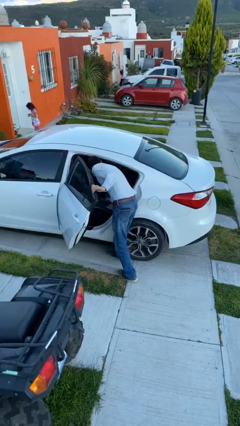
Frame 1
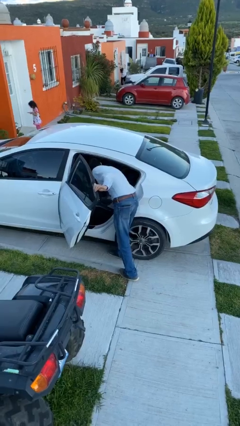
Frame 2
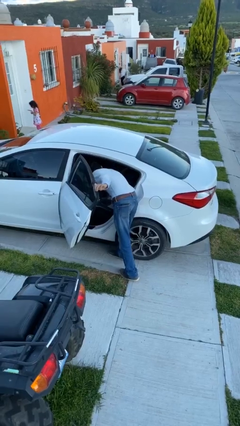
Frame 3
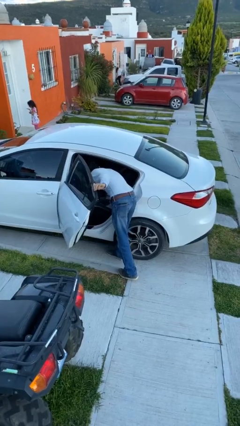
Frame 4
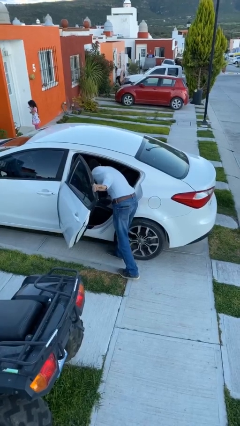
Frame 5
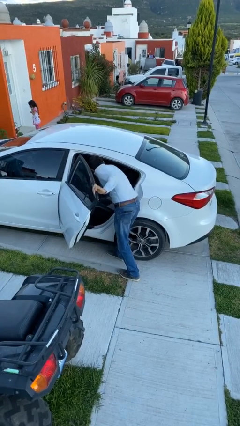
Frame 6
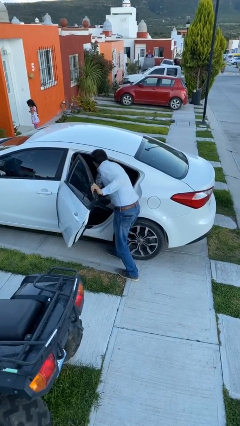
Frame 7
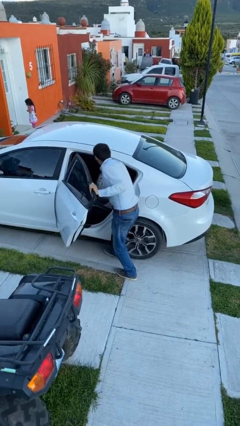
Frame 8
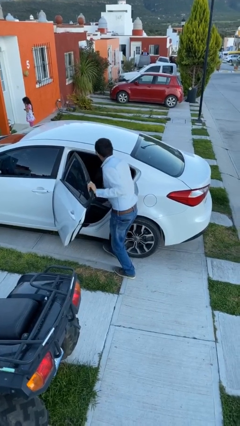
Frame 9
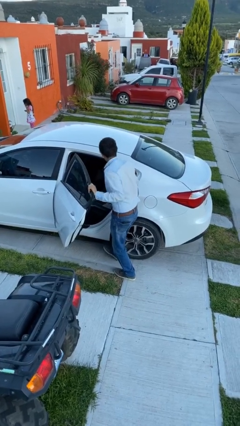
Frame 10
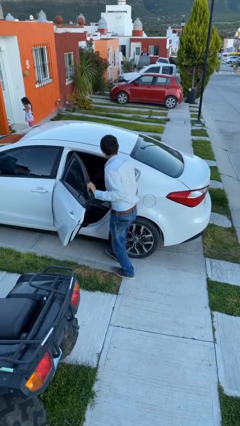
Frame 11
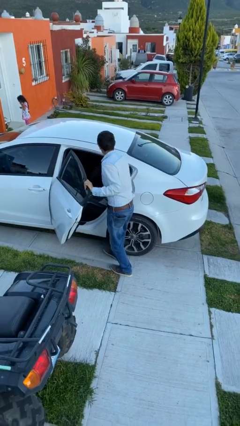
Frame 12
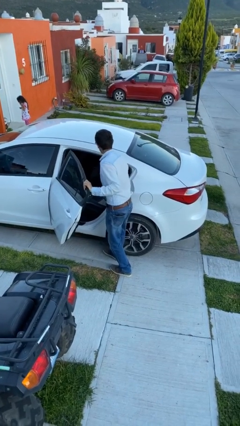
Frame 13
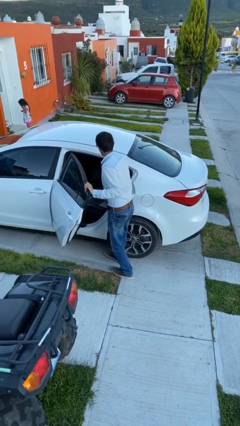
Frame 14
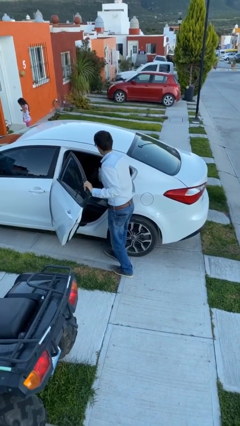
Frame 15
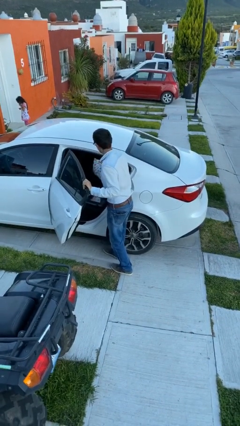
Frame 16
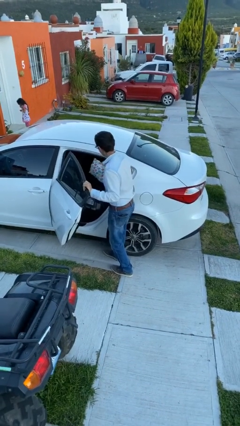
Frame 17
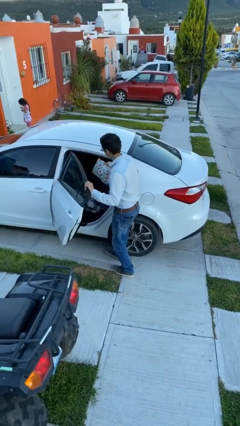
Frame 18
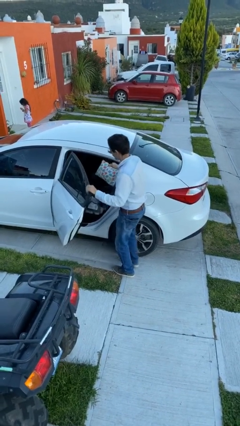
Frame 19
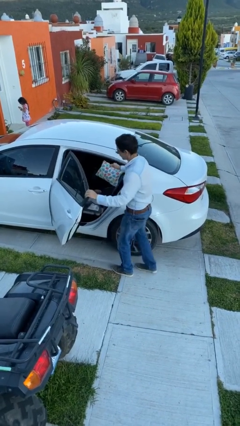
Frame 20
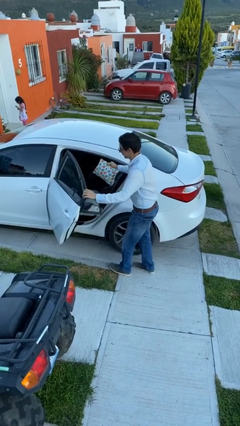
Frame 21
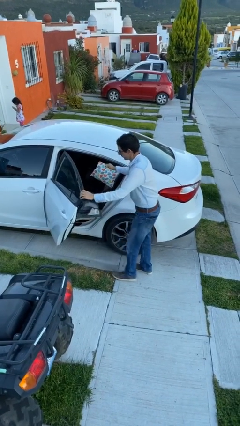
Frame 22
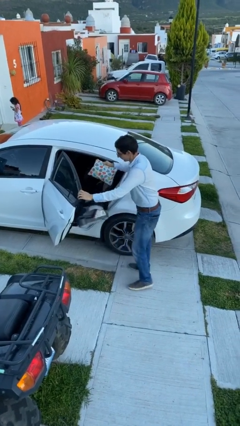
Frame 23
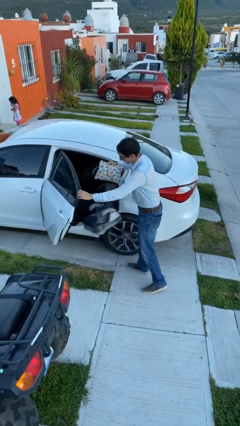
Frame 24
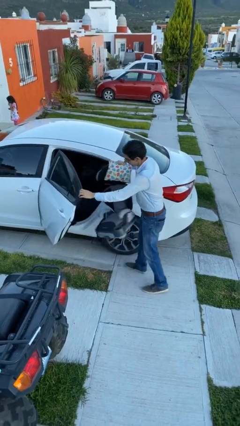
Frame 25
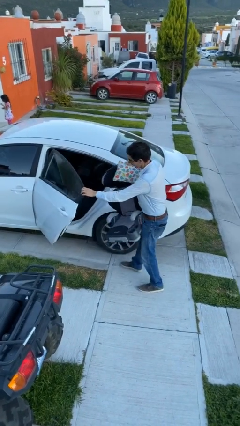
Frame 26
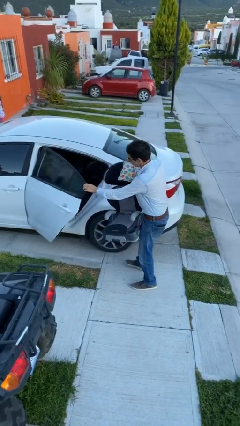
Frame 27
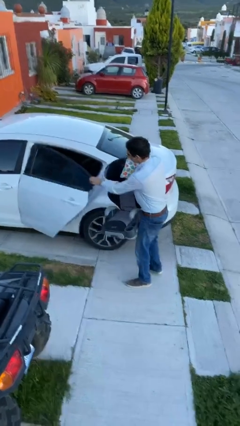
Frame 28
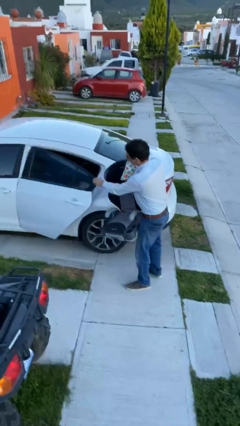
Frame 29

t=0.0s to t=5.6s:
person unloads car

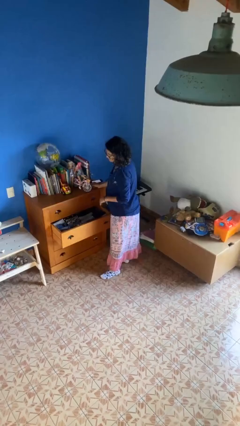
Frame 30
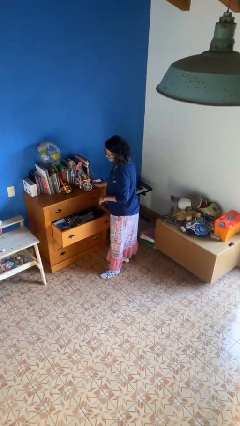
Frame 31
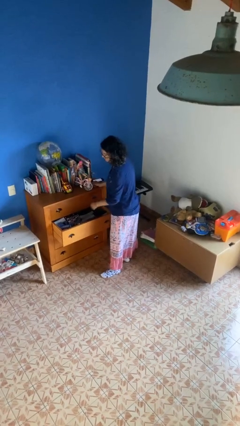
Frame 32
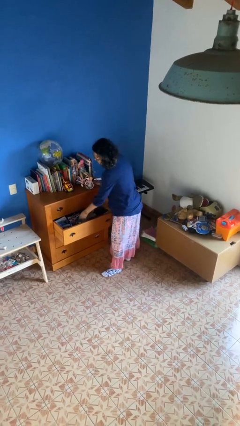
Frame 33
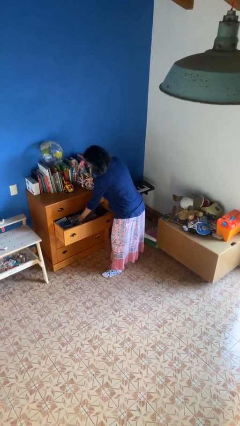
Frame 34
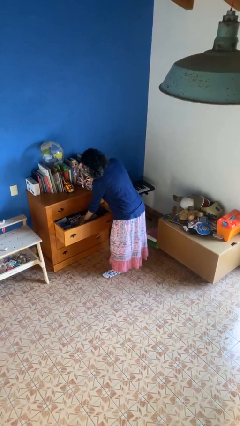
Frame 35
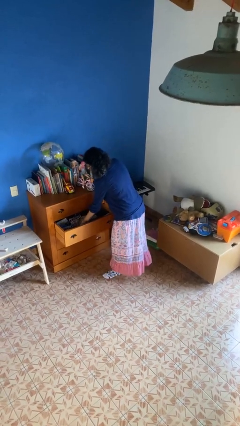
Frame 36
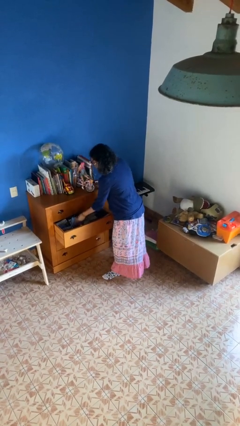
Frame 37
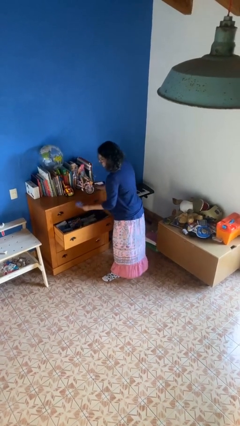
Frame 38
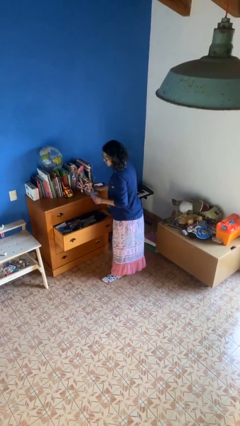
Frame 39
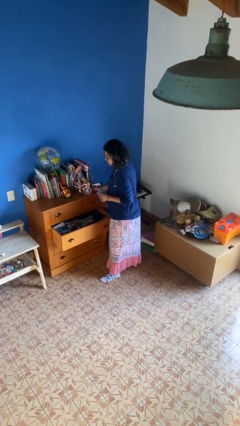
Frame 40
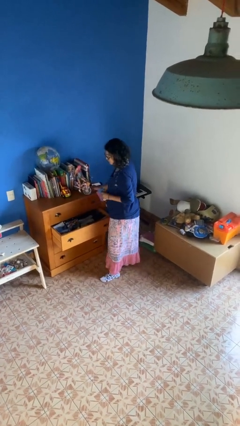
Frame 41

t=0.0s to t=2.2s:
person takes clothes from dresser

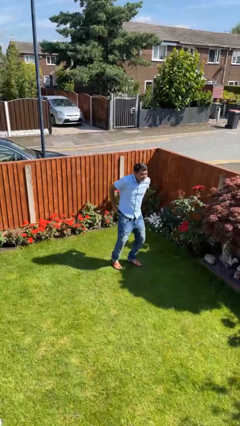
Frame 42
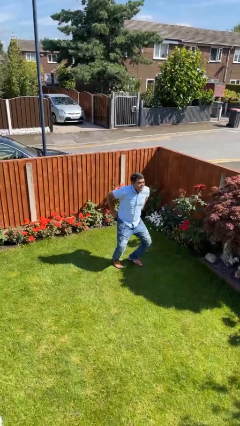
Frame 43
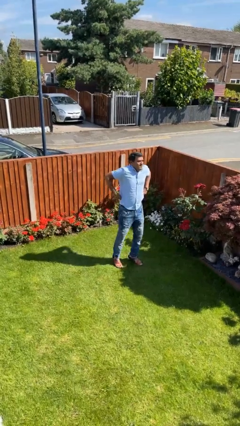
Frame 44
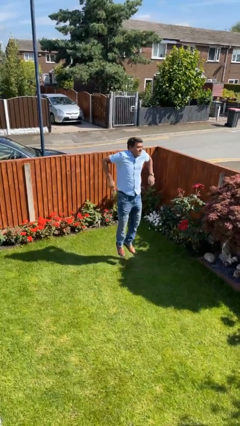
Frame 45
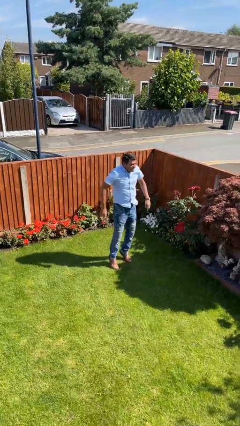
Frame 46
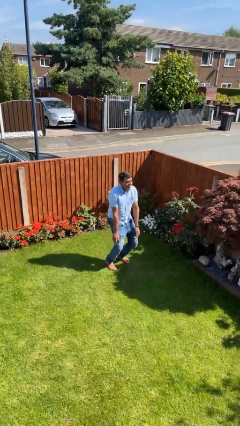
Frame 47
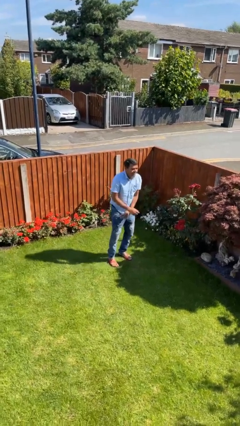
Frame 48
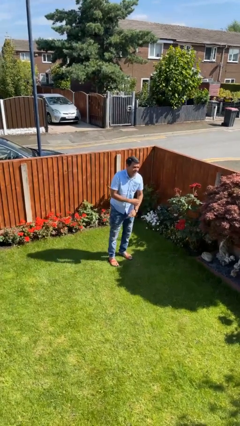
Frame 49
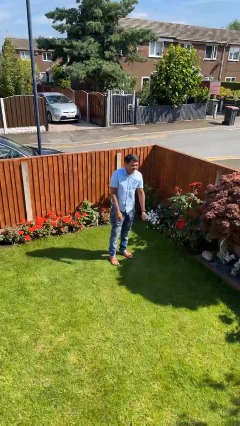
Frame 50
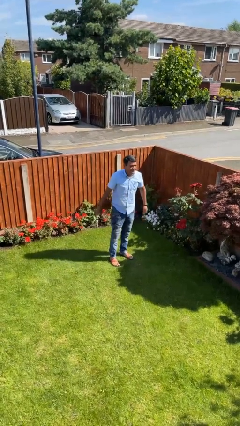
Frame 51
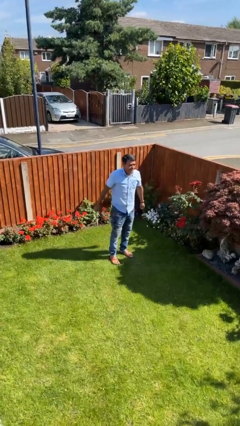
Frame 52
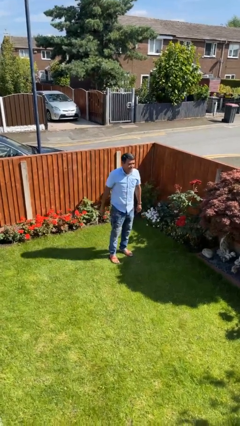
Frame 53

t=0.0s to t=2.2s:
person jumps

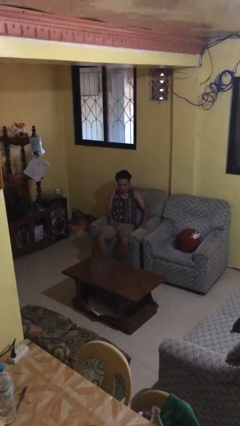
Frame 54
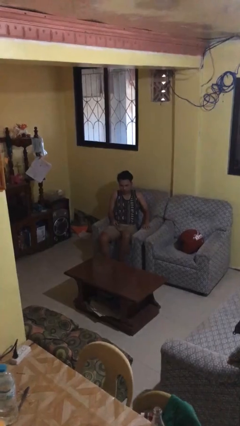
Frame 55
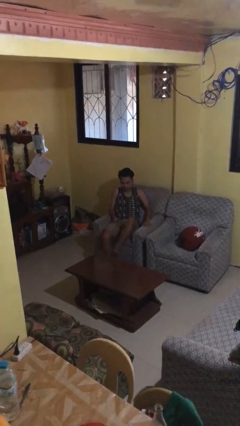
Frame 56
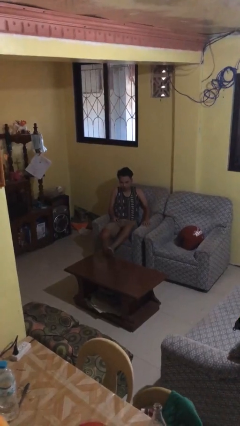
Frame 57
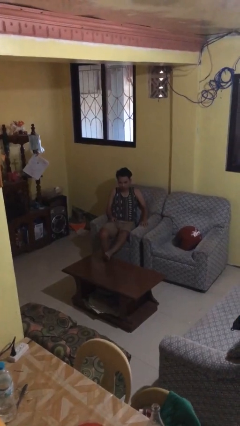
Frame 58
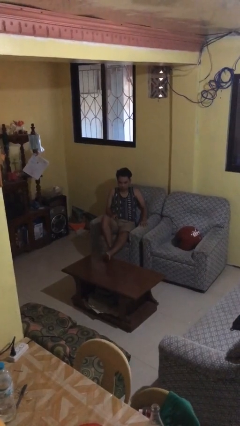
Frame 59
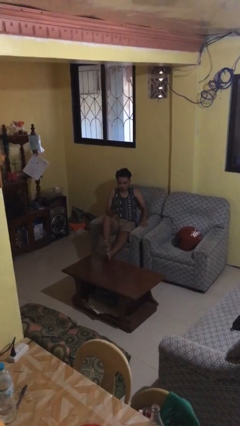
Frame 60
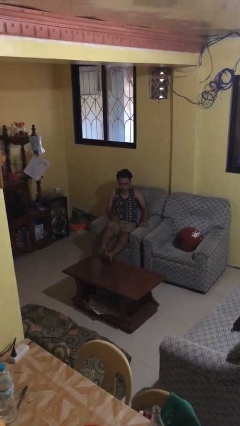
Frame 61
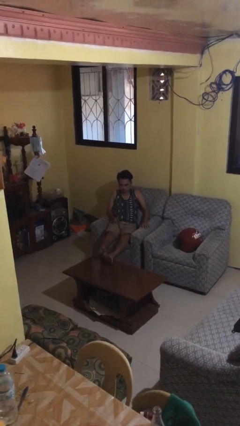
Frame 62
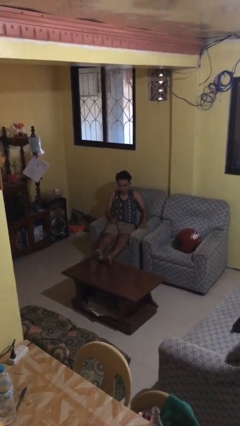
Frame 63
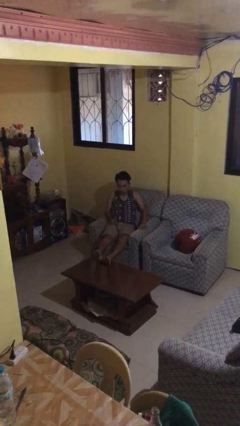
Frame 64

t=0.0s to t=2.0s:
person puts feet up

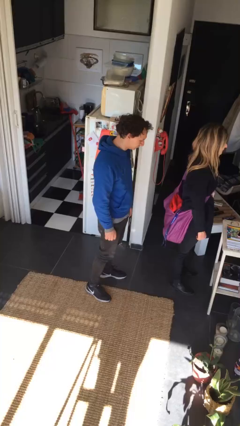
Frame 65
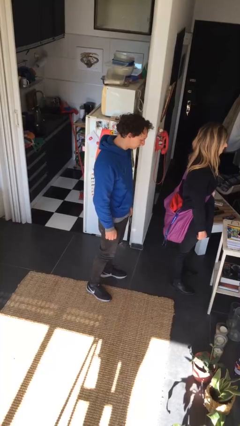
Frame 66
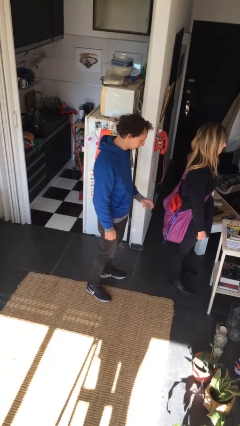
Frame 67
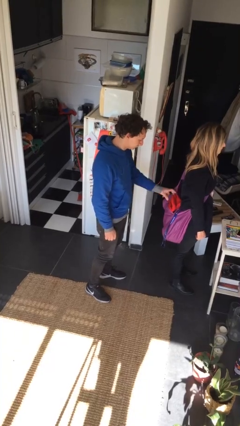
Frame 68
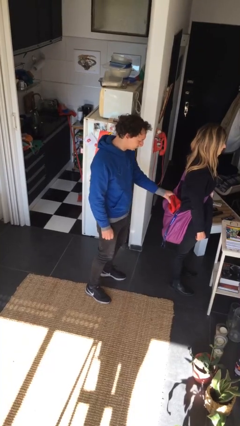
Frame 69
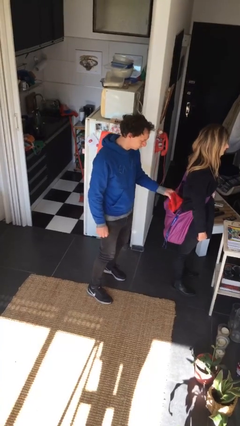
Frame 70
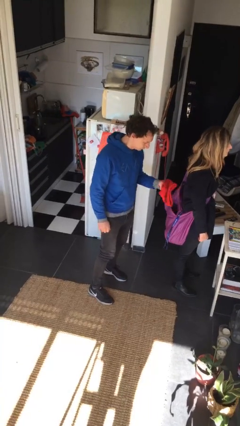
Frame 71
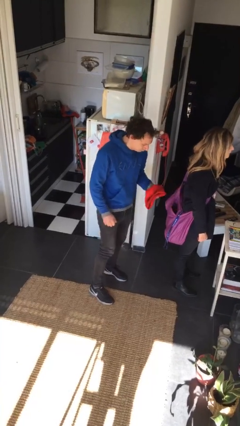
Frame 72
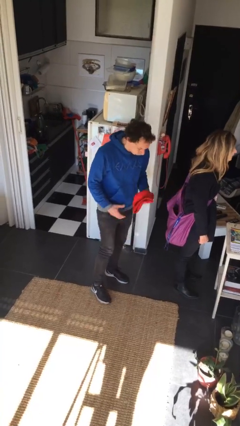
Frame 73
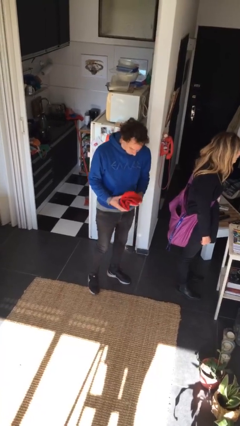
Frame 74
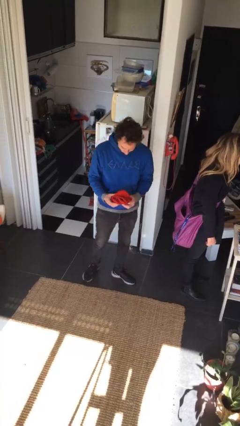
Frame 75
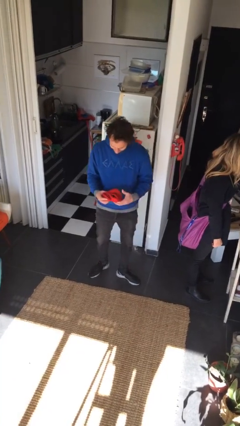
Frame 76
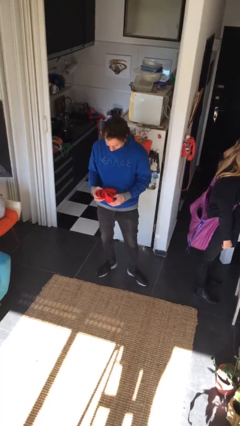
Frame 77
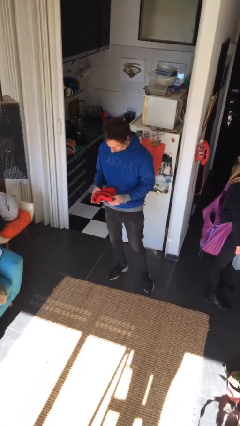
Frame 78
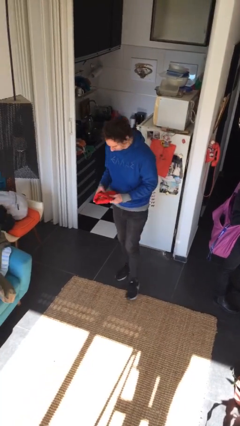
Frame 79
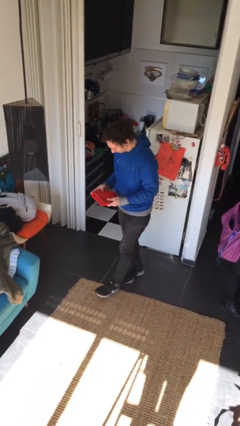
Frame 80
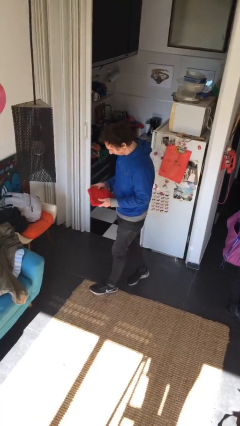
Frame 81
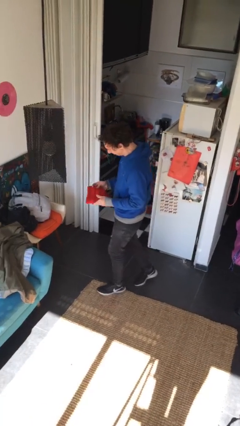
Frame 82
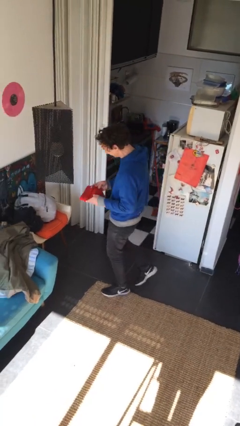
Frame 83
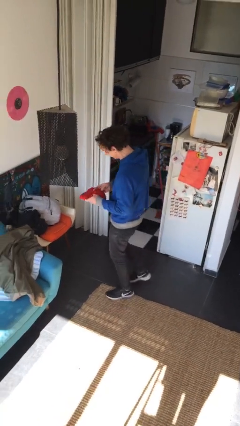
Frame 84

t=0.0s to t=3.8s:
person steals object from person

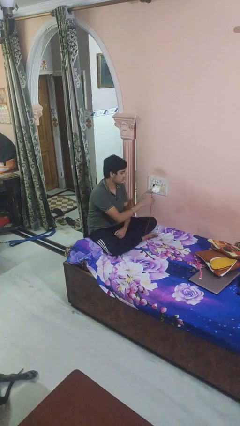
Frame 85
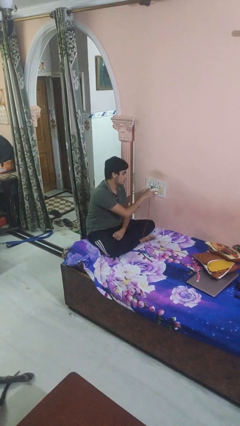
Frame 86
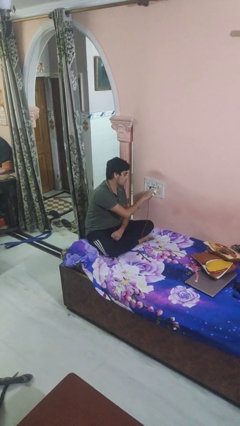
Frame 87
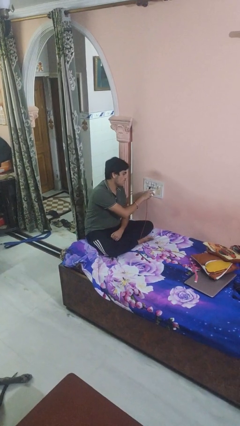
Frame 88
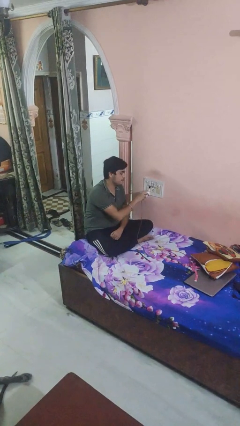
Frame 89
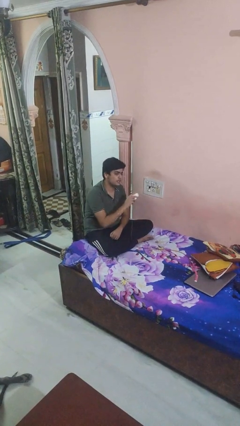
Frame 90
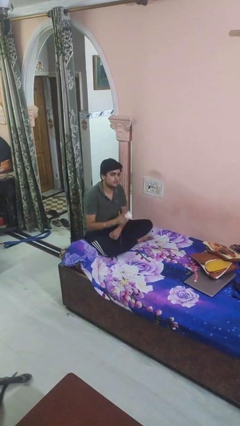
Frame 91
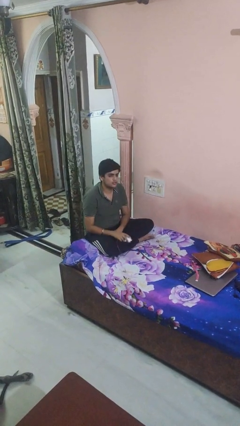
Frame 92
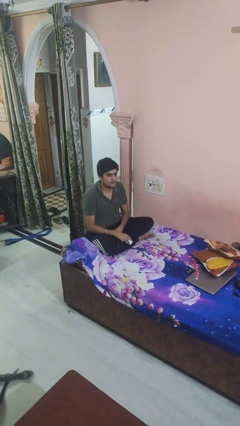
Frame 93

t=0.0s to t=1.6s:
person unplugs from electrical socket
